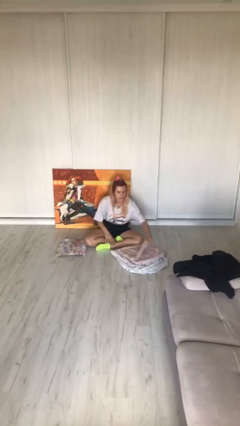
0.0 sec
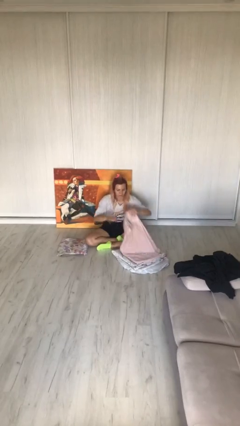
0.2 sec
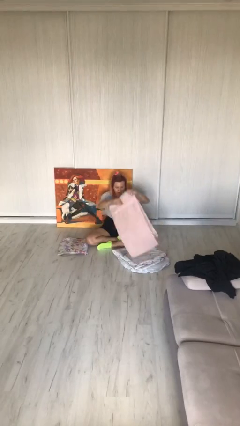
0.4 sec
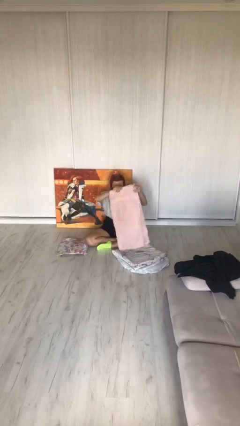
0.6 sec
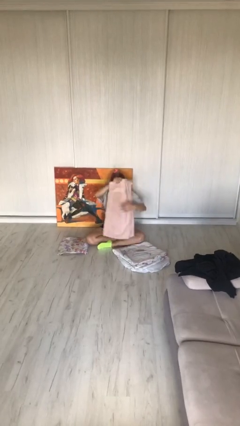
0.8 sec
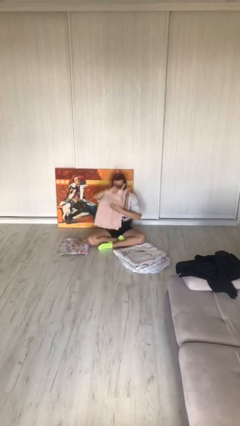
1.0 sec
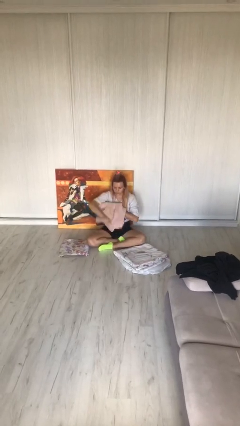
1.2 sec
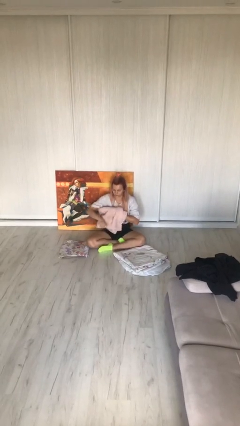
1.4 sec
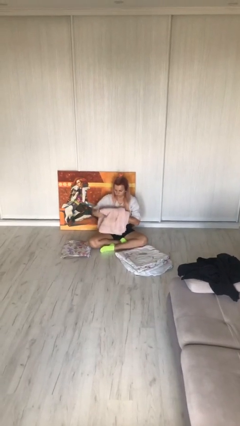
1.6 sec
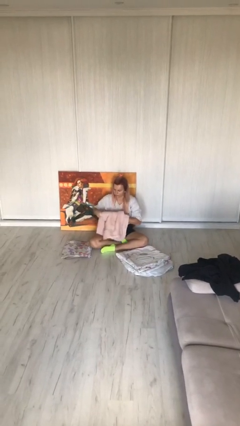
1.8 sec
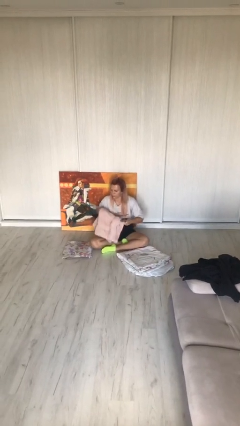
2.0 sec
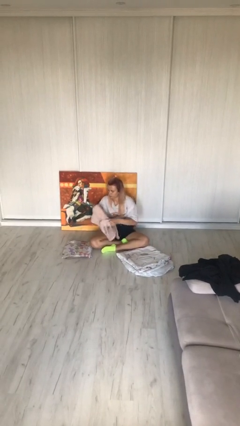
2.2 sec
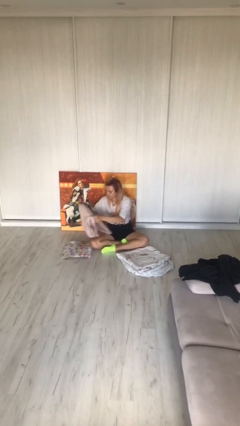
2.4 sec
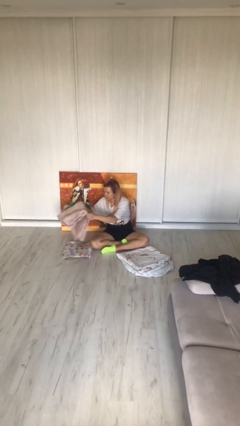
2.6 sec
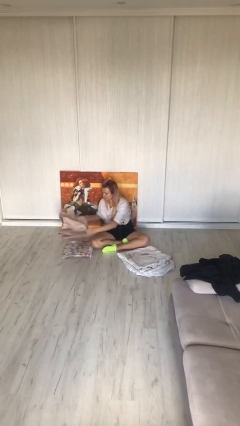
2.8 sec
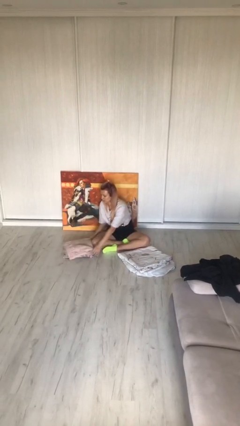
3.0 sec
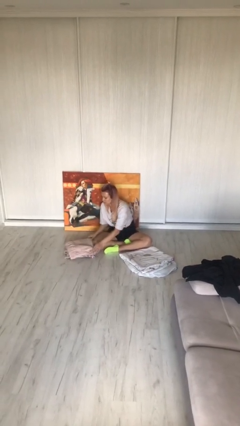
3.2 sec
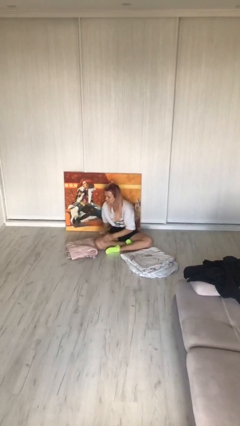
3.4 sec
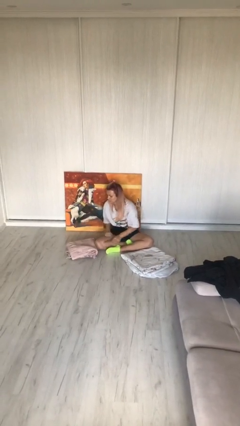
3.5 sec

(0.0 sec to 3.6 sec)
person folds towel

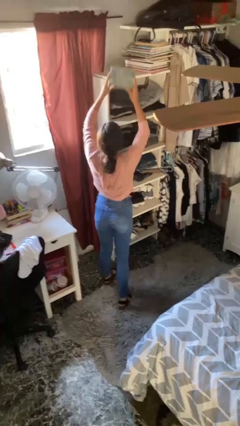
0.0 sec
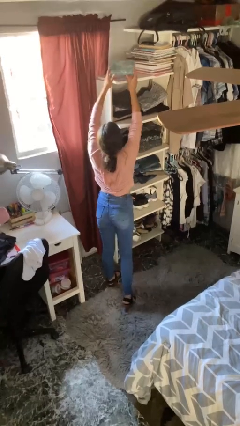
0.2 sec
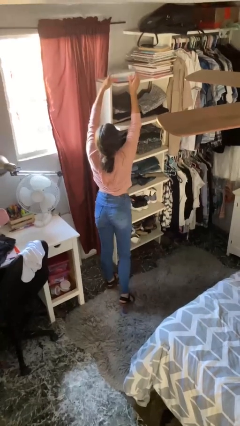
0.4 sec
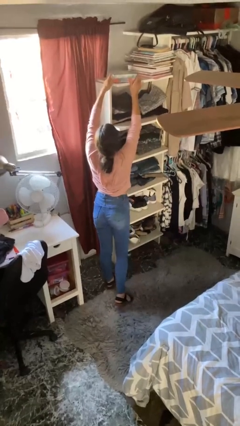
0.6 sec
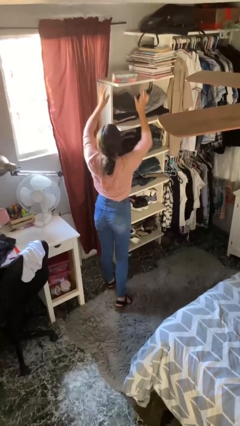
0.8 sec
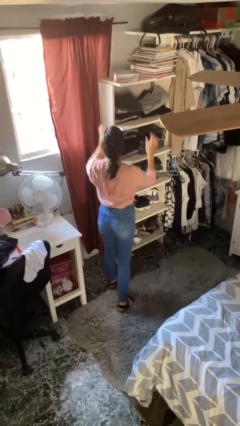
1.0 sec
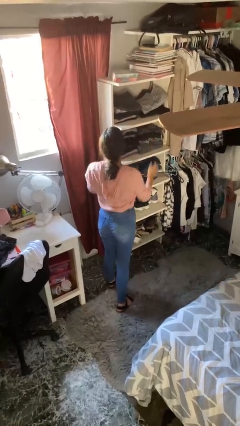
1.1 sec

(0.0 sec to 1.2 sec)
person puts down object on shelf

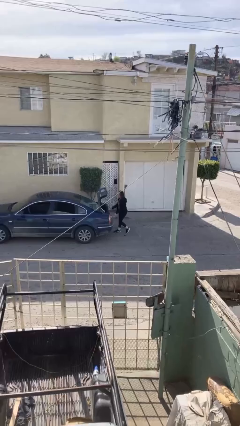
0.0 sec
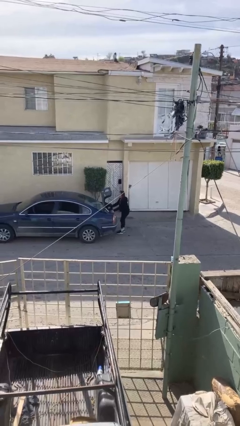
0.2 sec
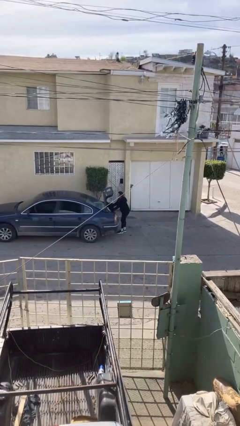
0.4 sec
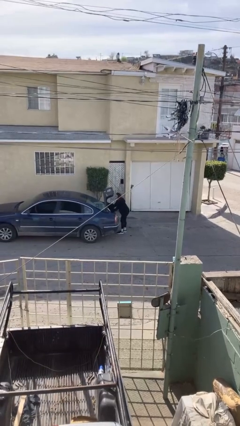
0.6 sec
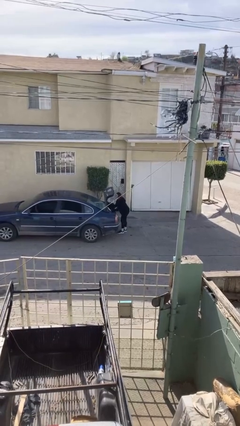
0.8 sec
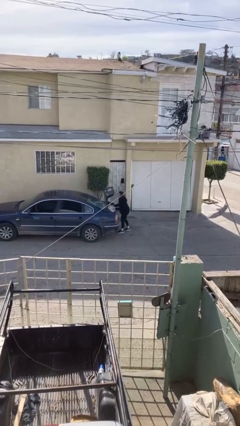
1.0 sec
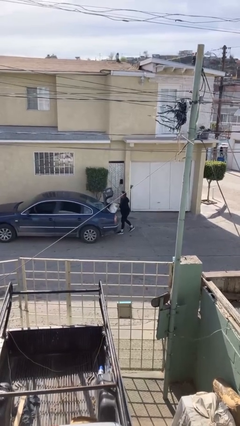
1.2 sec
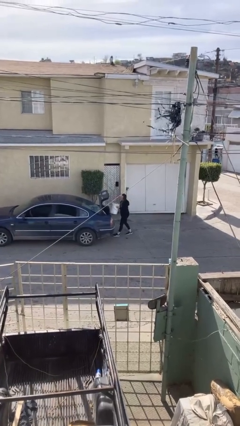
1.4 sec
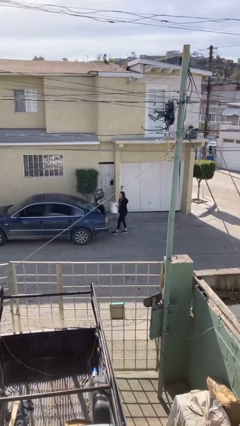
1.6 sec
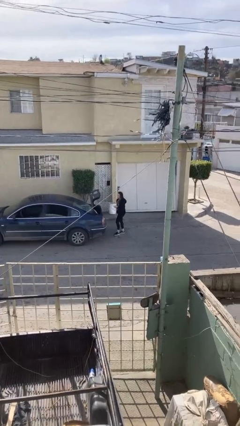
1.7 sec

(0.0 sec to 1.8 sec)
person unloads car

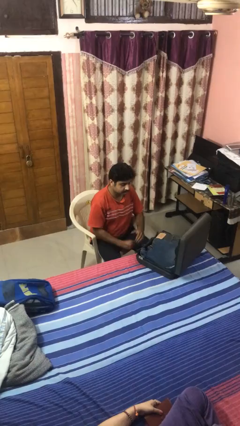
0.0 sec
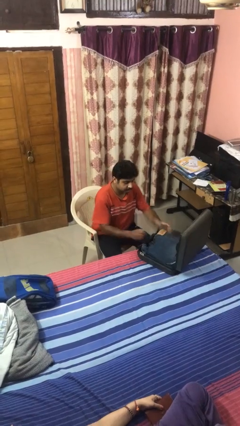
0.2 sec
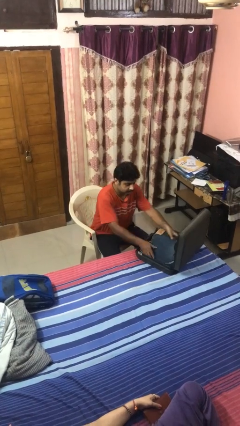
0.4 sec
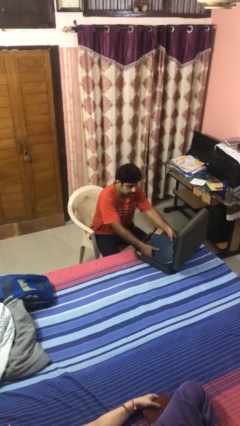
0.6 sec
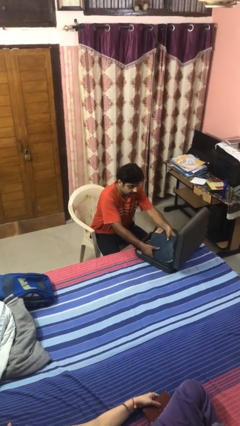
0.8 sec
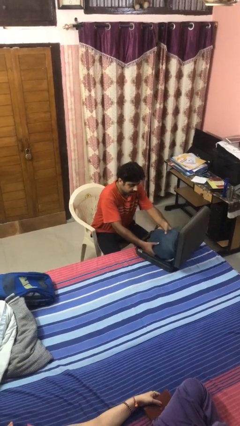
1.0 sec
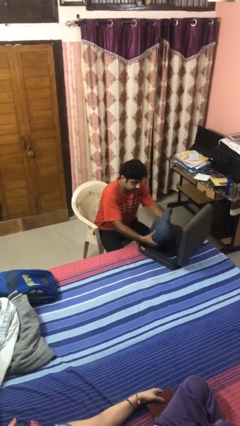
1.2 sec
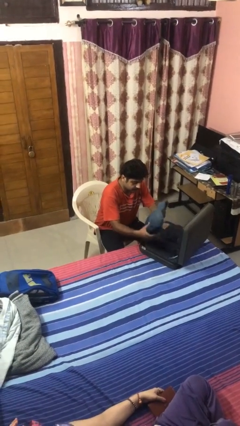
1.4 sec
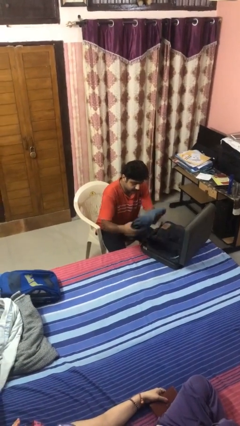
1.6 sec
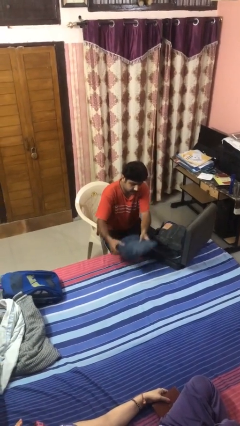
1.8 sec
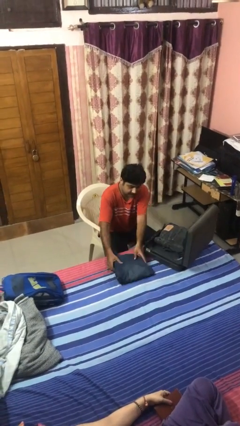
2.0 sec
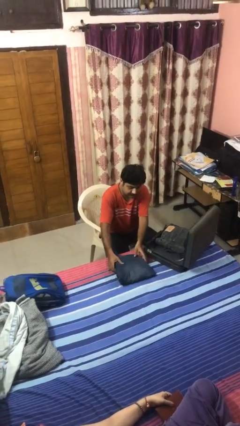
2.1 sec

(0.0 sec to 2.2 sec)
person unloads clothes from suitcase

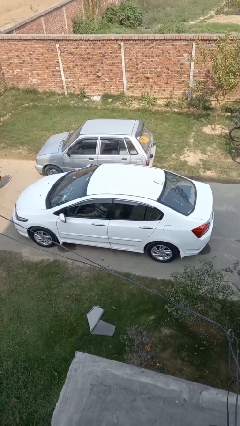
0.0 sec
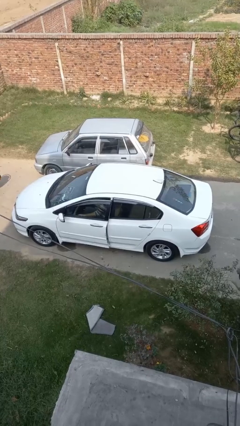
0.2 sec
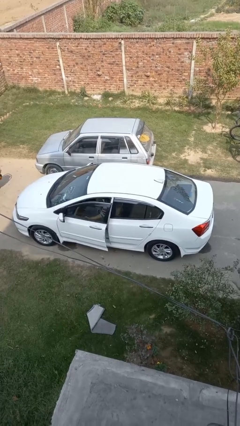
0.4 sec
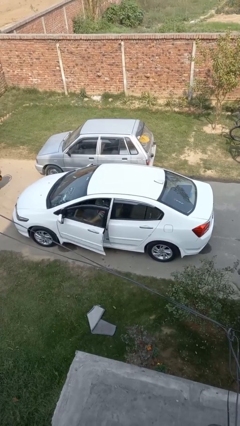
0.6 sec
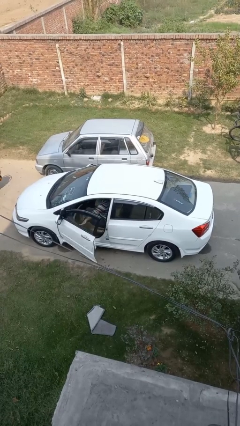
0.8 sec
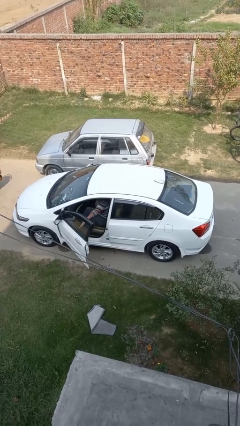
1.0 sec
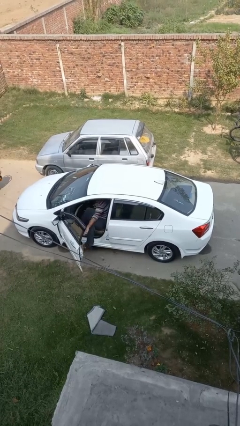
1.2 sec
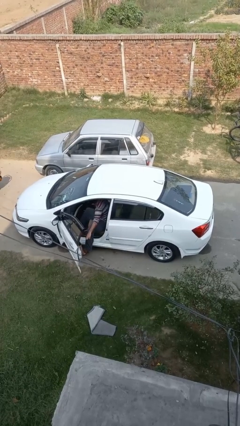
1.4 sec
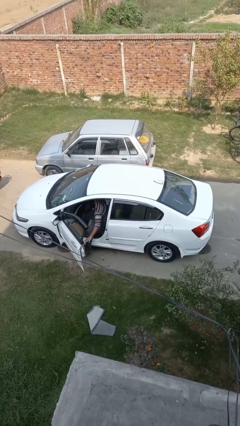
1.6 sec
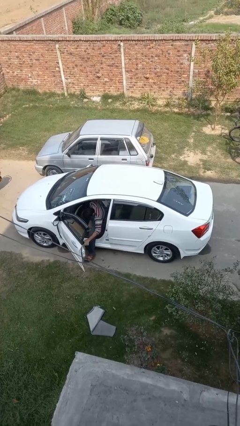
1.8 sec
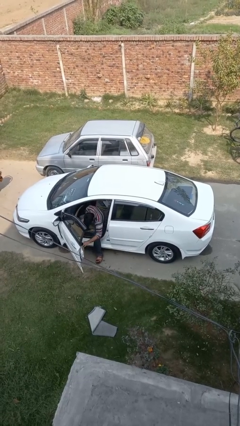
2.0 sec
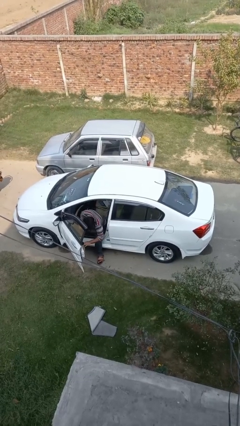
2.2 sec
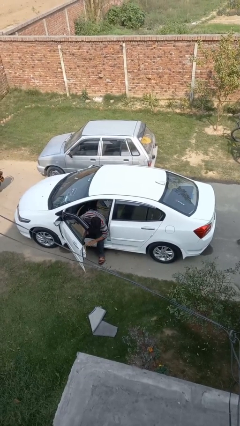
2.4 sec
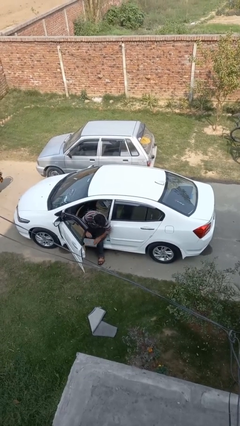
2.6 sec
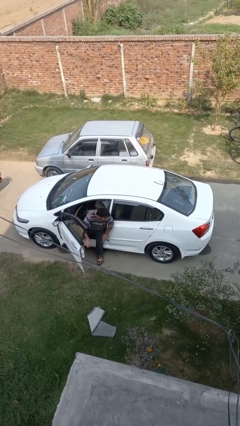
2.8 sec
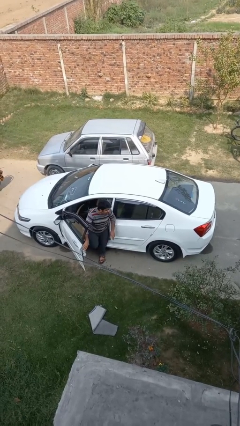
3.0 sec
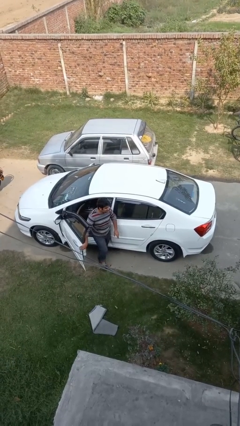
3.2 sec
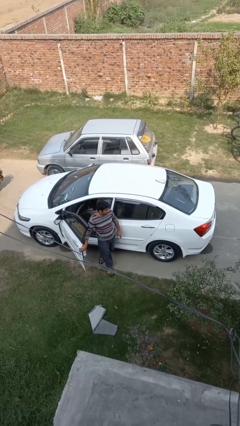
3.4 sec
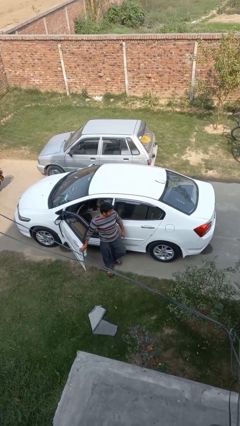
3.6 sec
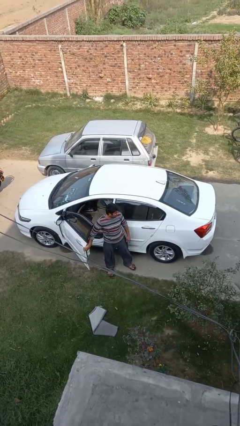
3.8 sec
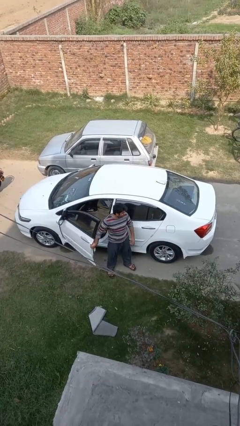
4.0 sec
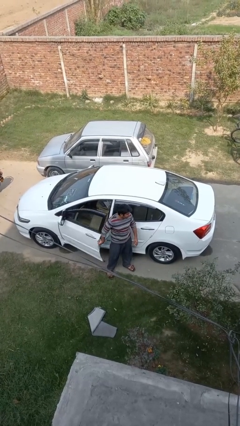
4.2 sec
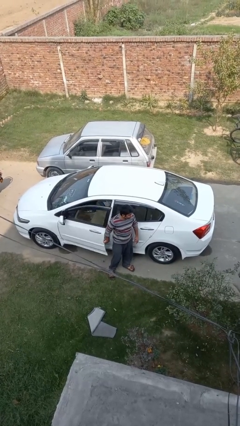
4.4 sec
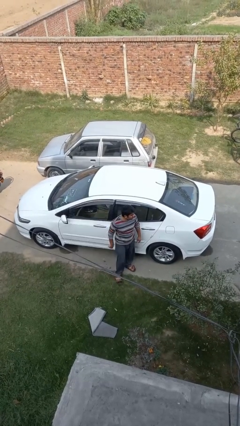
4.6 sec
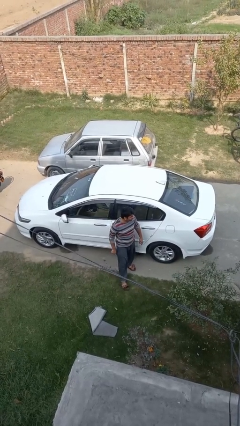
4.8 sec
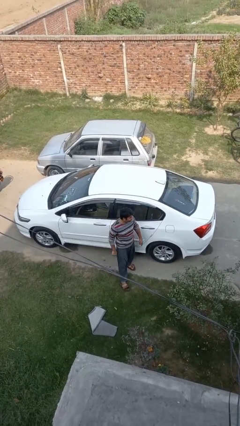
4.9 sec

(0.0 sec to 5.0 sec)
car drops off person

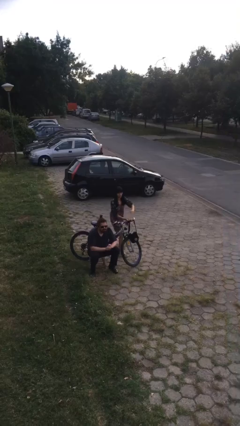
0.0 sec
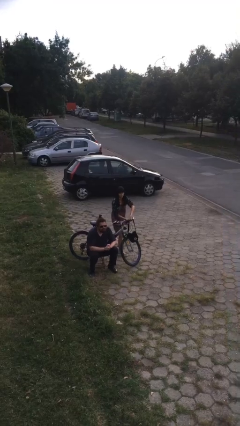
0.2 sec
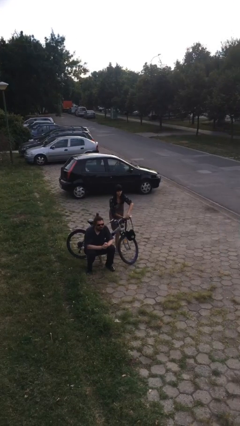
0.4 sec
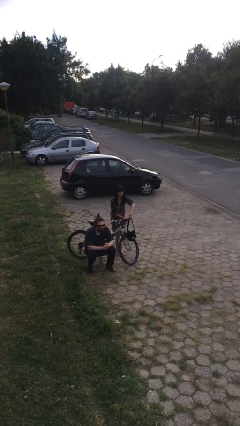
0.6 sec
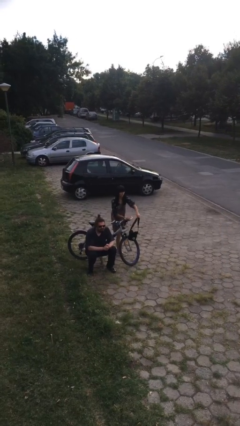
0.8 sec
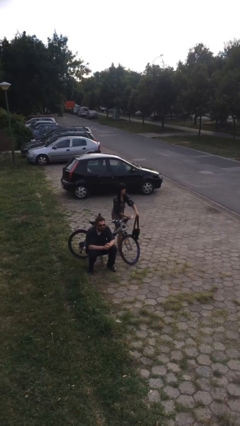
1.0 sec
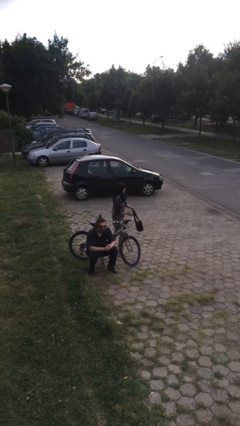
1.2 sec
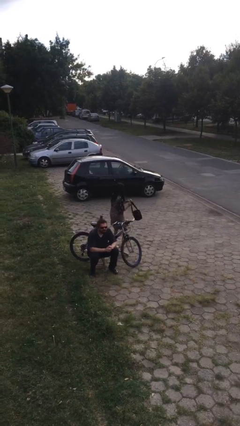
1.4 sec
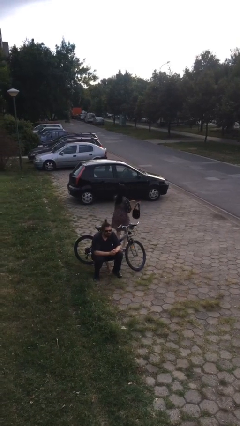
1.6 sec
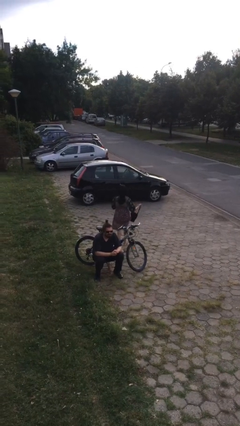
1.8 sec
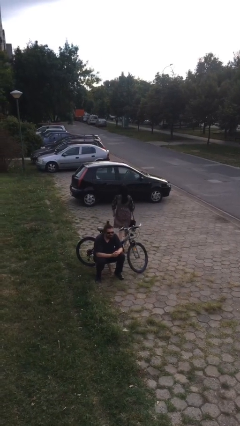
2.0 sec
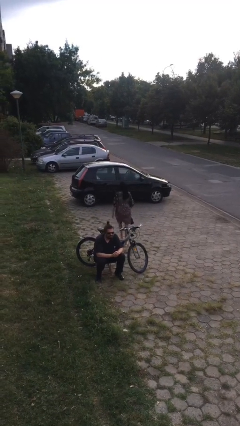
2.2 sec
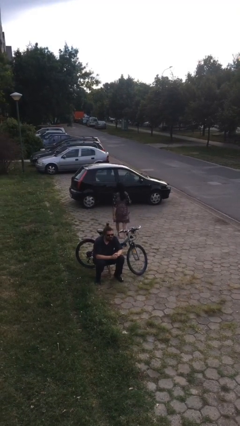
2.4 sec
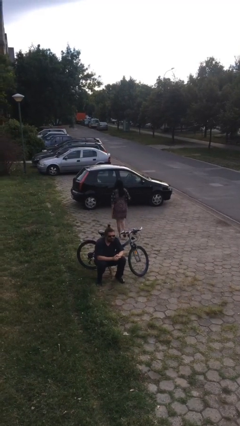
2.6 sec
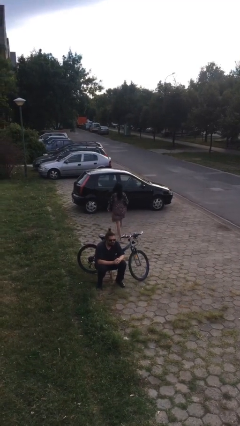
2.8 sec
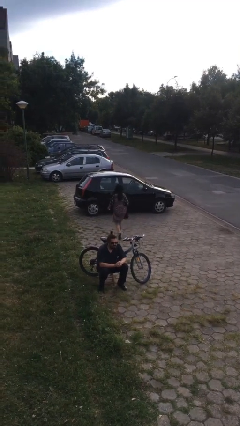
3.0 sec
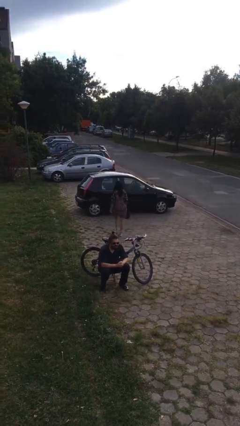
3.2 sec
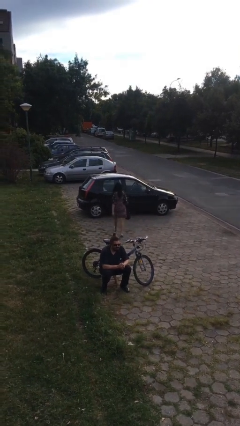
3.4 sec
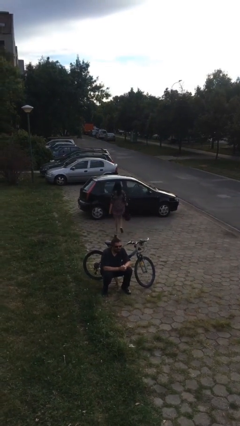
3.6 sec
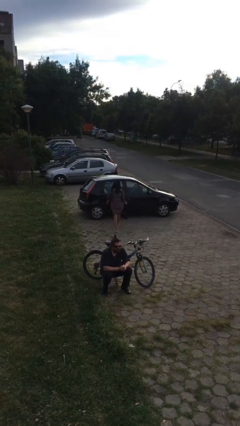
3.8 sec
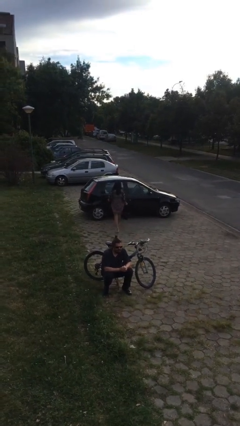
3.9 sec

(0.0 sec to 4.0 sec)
person steals object from person
